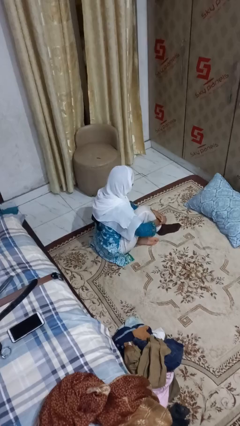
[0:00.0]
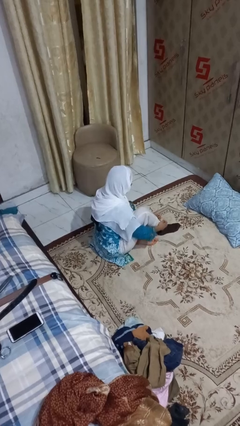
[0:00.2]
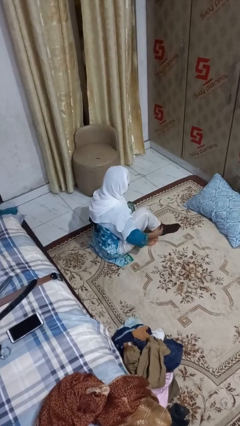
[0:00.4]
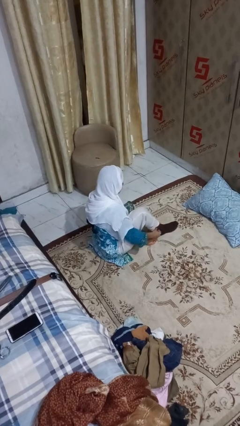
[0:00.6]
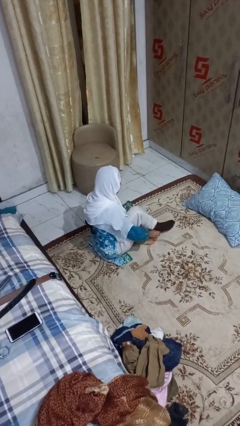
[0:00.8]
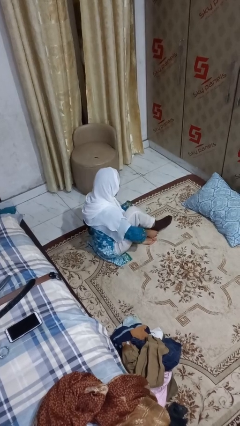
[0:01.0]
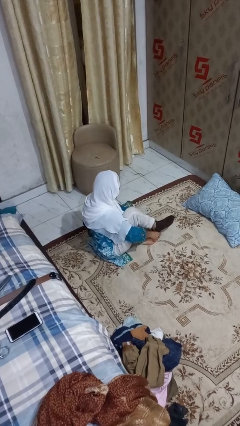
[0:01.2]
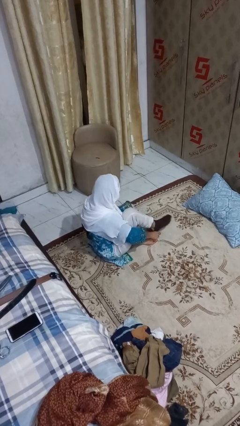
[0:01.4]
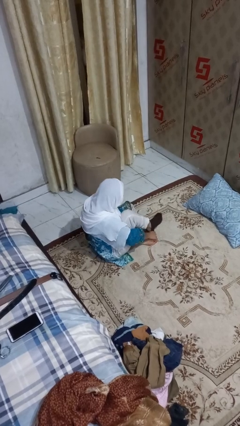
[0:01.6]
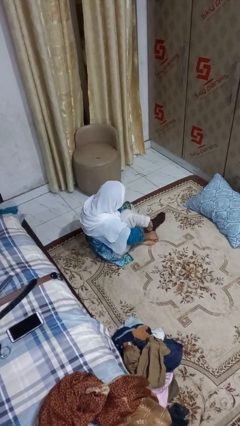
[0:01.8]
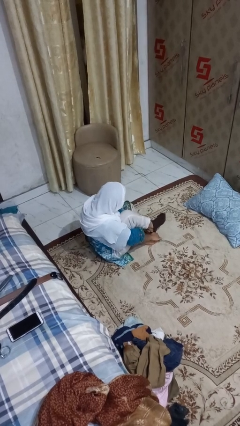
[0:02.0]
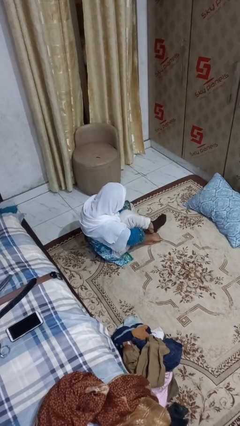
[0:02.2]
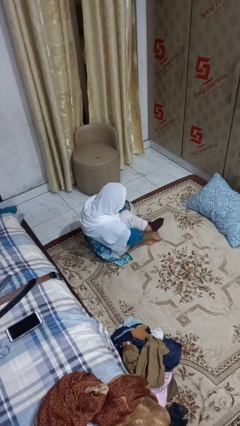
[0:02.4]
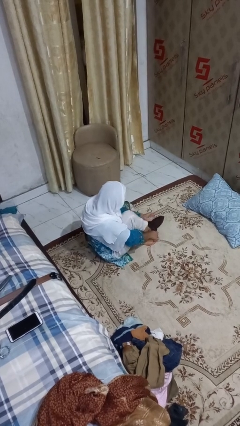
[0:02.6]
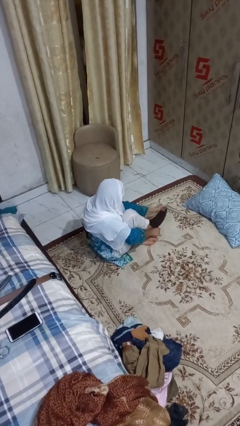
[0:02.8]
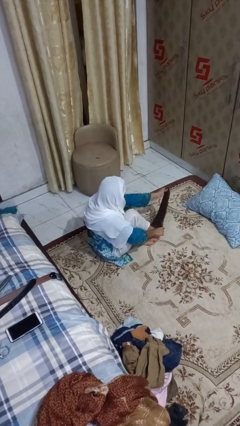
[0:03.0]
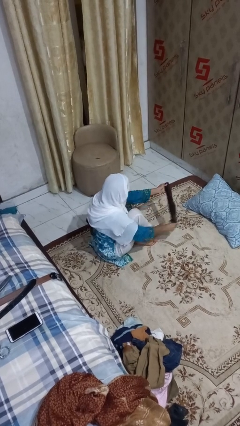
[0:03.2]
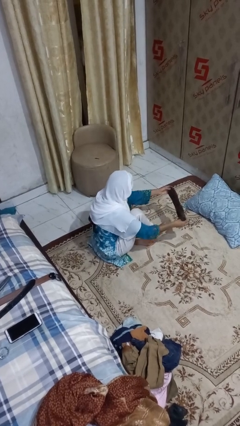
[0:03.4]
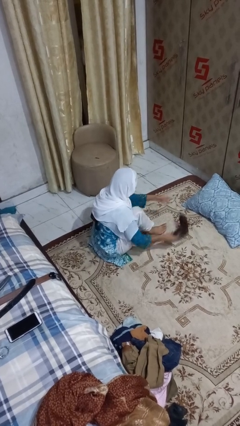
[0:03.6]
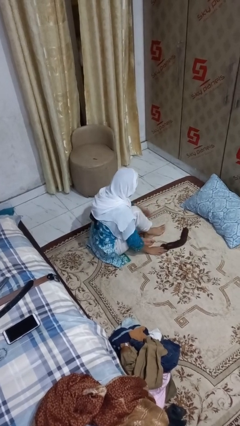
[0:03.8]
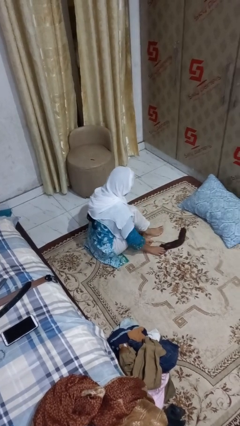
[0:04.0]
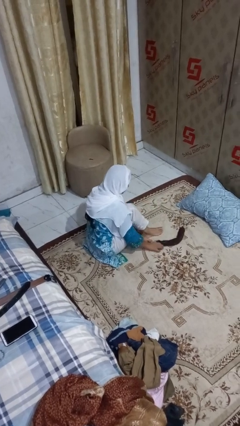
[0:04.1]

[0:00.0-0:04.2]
person takes off socks

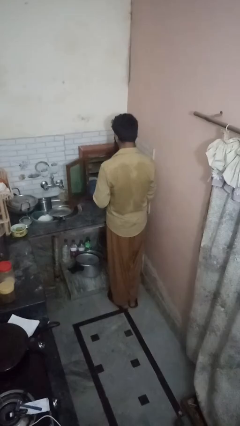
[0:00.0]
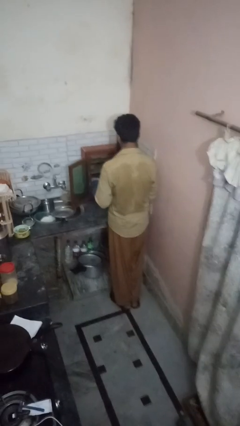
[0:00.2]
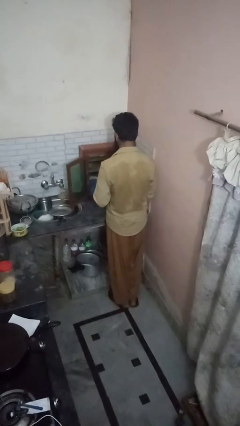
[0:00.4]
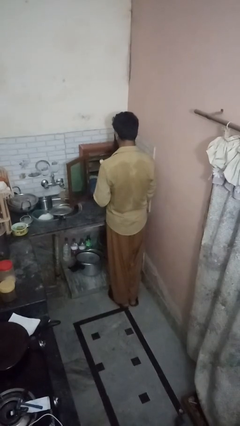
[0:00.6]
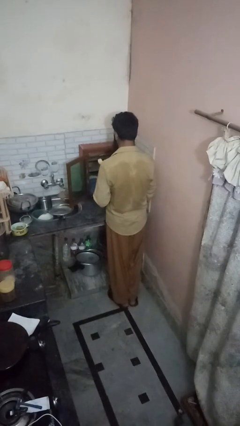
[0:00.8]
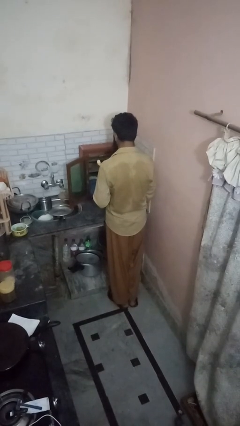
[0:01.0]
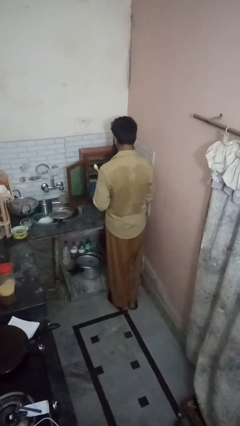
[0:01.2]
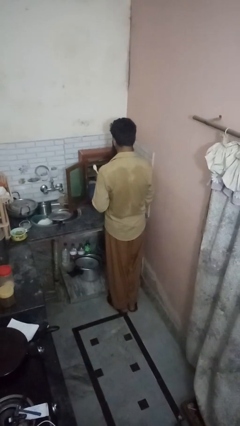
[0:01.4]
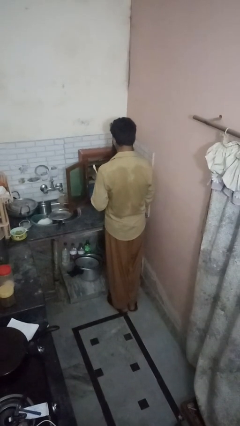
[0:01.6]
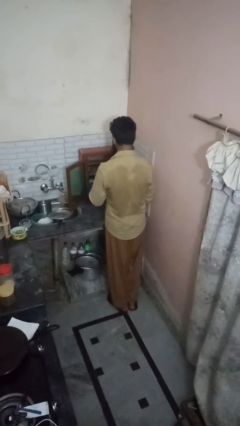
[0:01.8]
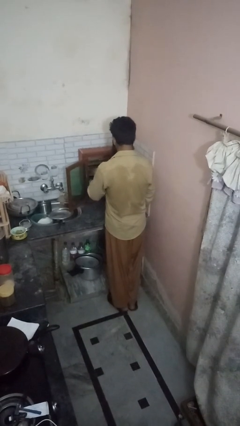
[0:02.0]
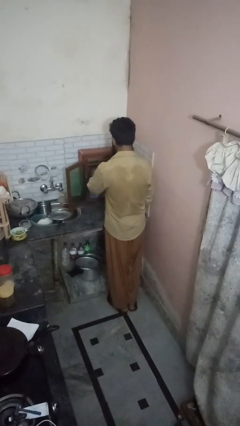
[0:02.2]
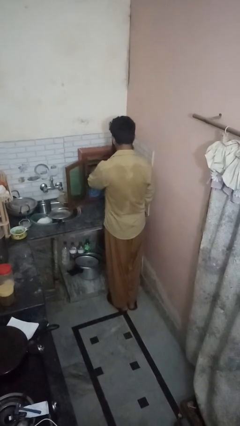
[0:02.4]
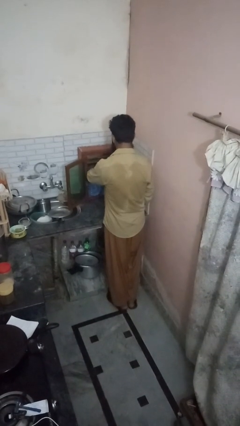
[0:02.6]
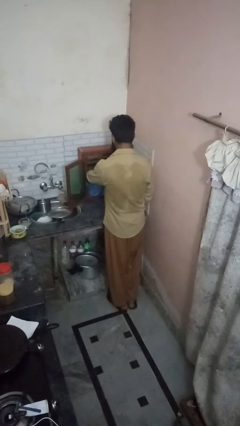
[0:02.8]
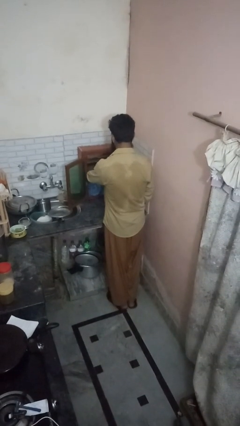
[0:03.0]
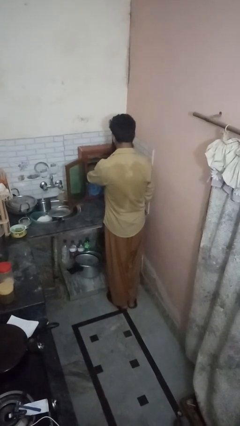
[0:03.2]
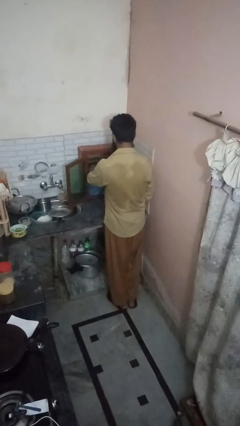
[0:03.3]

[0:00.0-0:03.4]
person takes object from cabinet

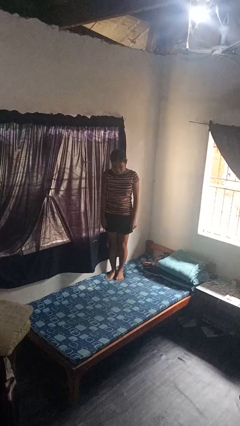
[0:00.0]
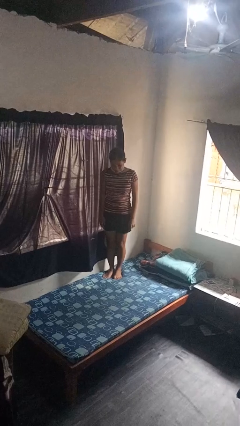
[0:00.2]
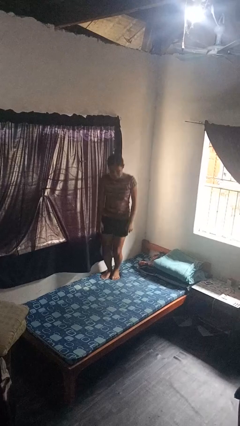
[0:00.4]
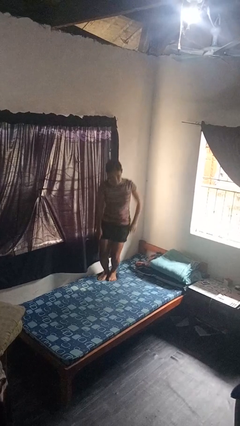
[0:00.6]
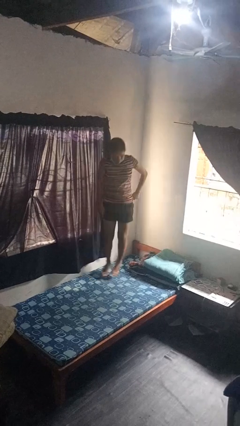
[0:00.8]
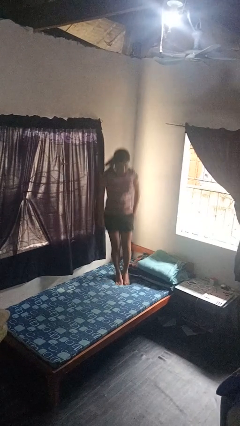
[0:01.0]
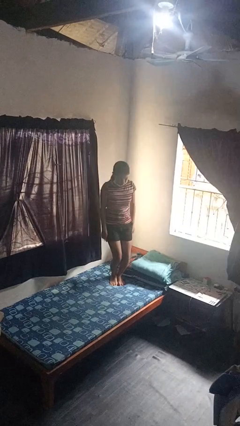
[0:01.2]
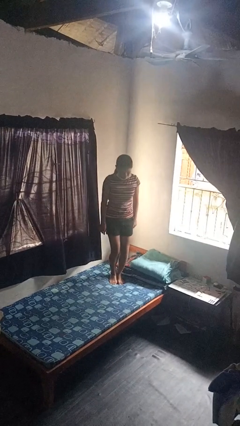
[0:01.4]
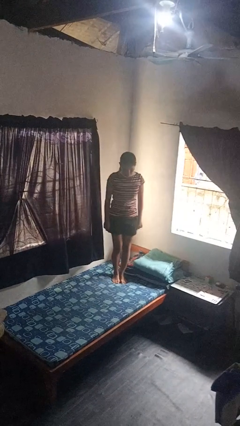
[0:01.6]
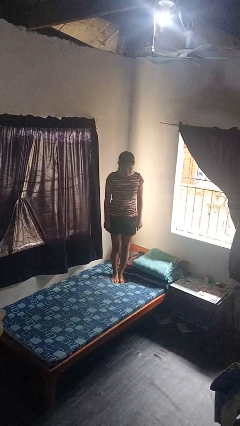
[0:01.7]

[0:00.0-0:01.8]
person jumps on bed

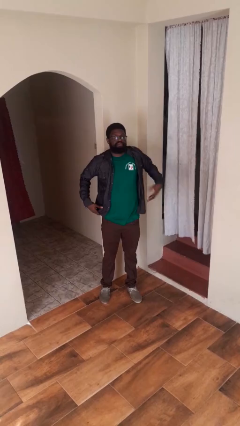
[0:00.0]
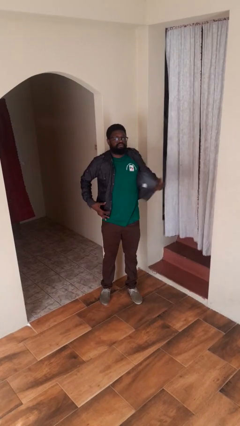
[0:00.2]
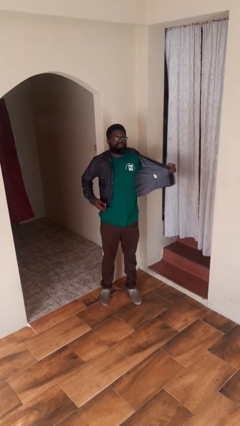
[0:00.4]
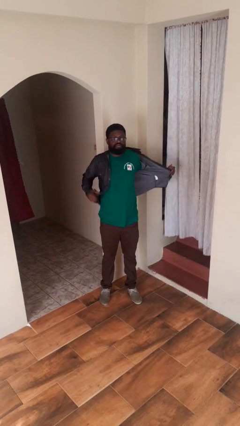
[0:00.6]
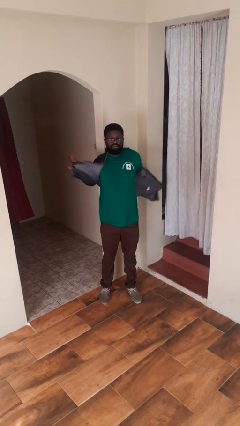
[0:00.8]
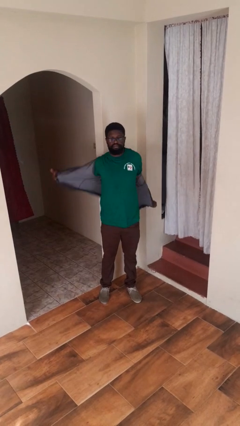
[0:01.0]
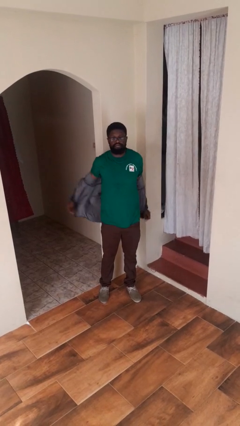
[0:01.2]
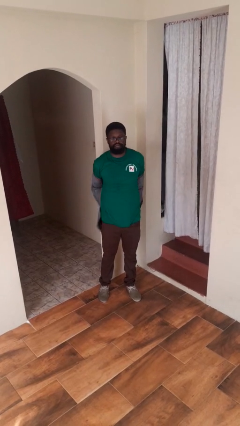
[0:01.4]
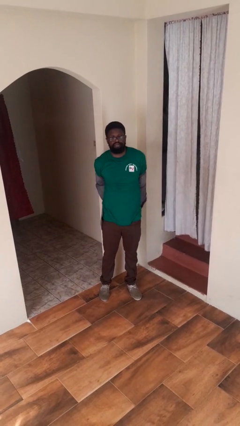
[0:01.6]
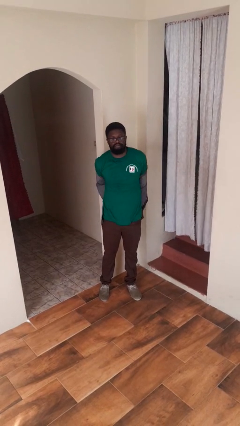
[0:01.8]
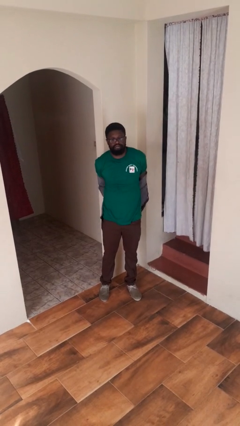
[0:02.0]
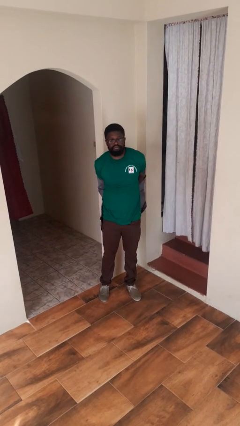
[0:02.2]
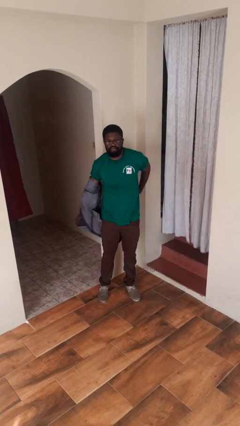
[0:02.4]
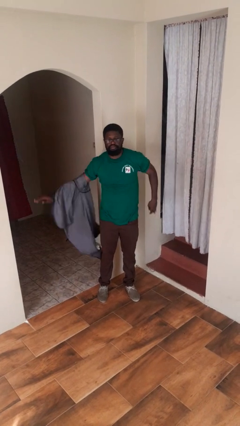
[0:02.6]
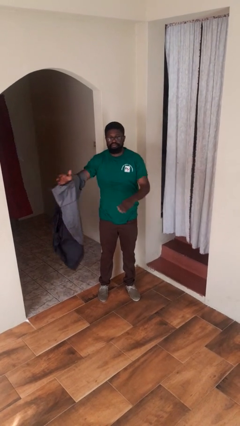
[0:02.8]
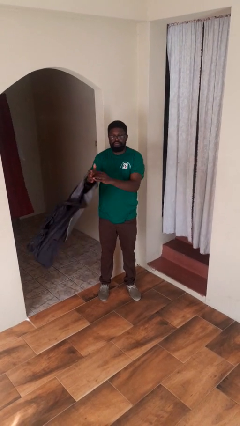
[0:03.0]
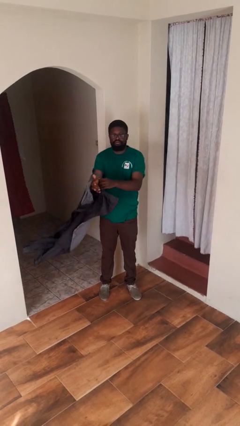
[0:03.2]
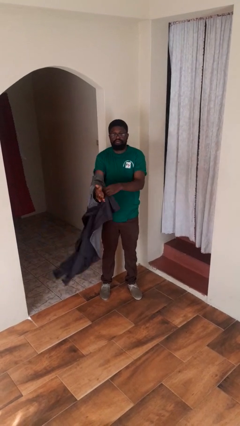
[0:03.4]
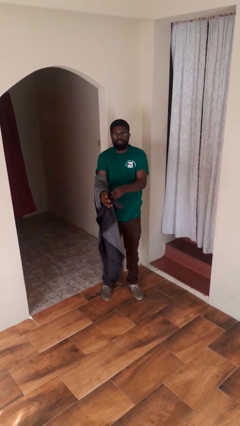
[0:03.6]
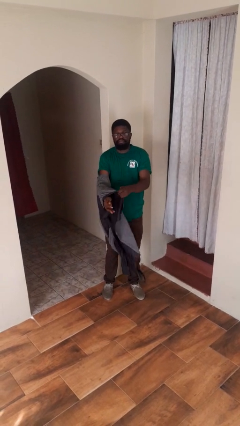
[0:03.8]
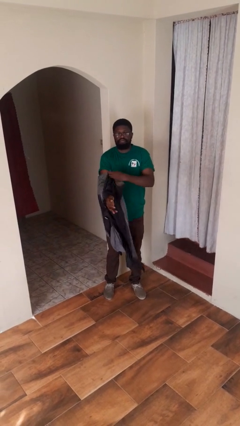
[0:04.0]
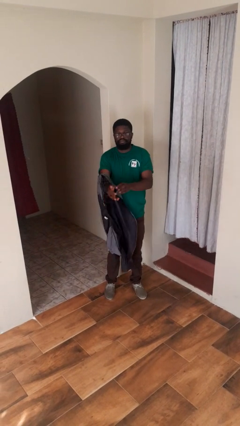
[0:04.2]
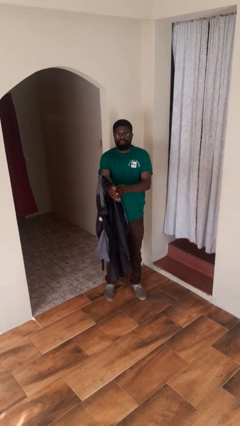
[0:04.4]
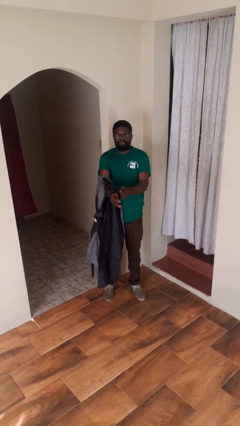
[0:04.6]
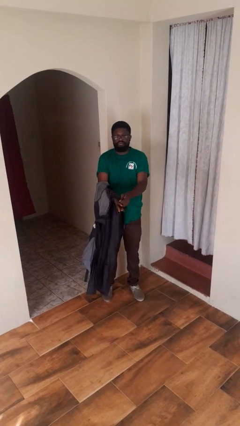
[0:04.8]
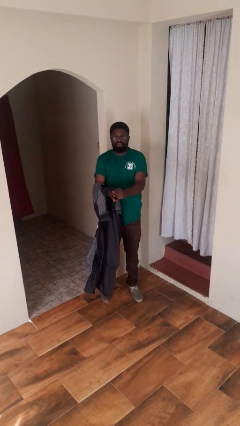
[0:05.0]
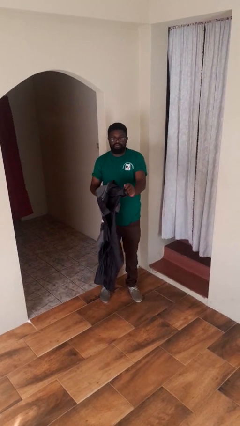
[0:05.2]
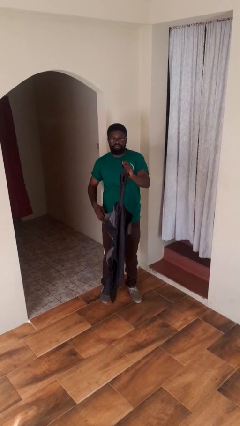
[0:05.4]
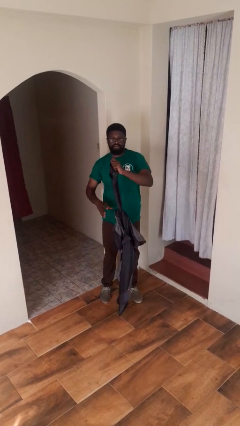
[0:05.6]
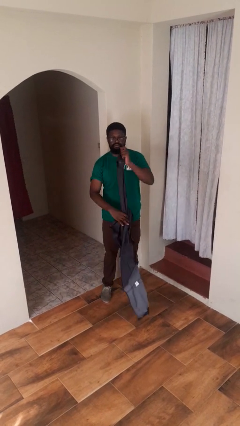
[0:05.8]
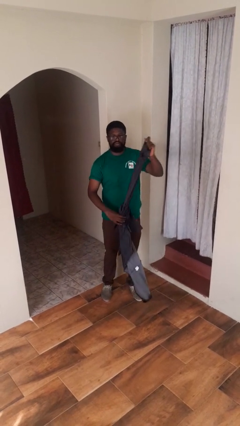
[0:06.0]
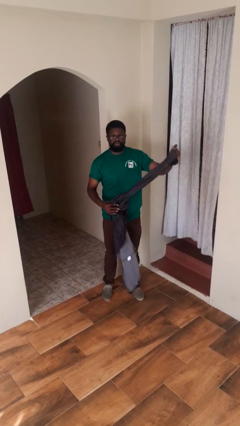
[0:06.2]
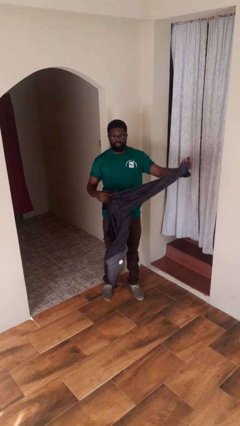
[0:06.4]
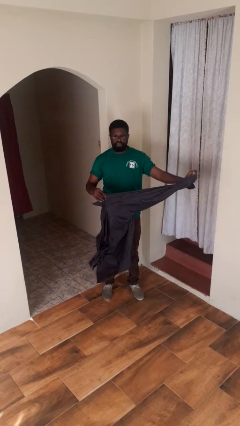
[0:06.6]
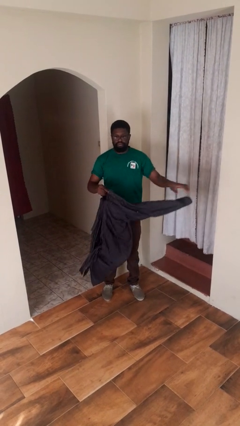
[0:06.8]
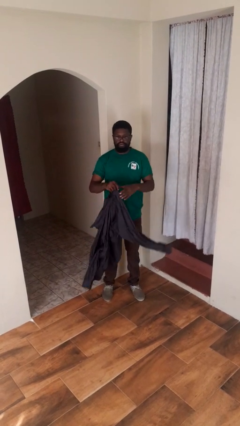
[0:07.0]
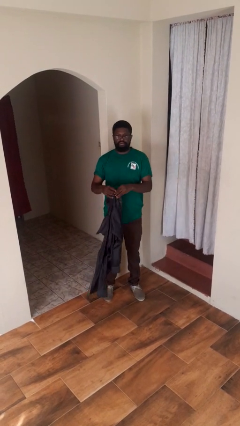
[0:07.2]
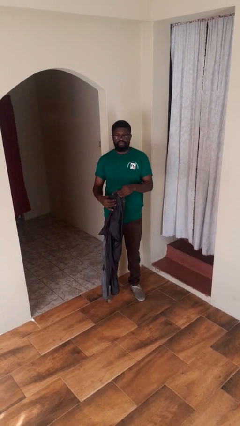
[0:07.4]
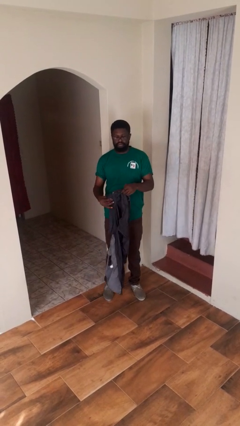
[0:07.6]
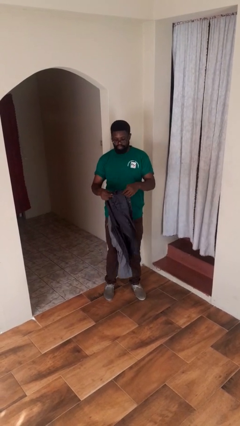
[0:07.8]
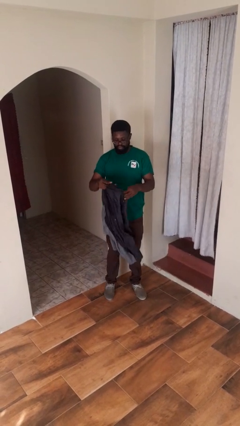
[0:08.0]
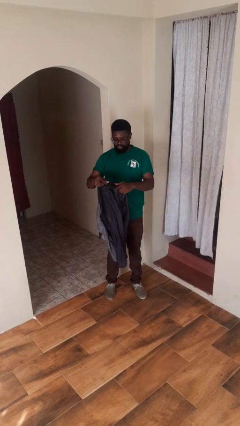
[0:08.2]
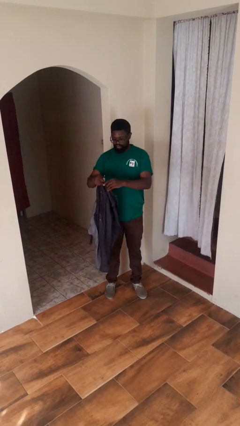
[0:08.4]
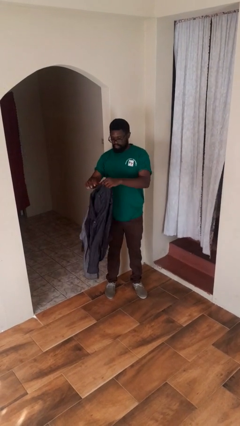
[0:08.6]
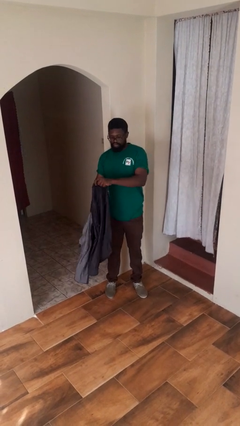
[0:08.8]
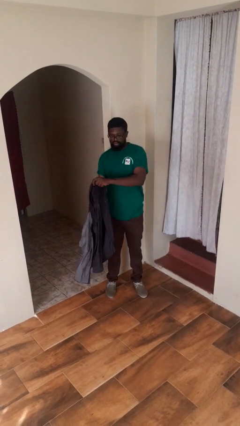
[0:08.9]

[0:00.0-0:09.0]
person takes off shirt
